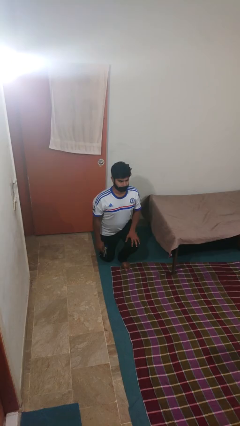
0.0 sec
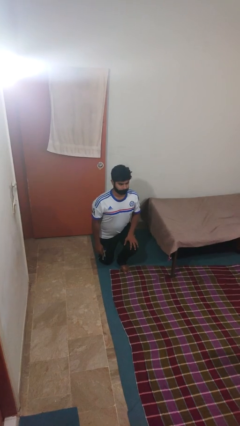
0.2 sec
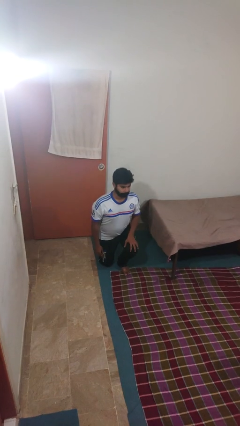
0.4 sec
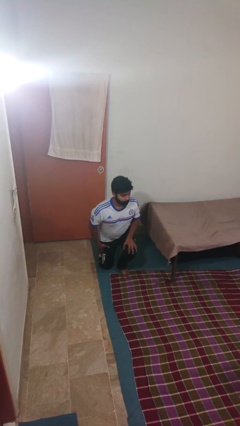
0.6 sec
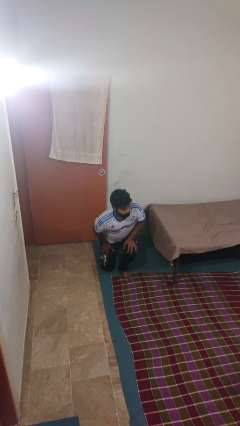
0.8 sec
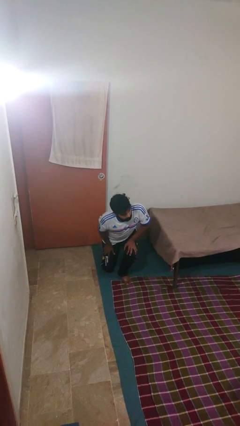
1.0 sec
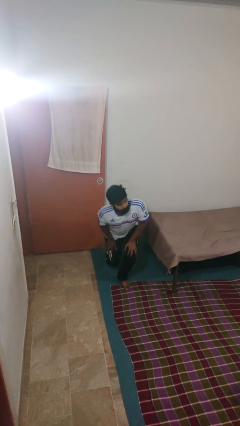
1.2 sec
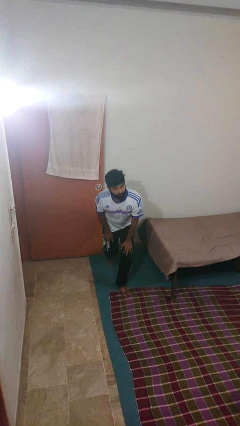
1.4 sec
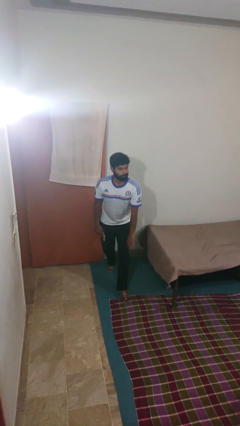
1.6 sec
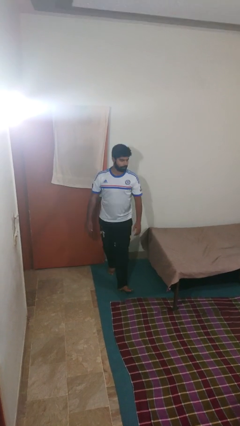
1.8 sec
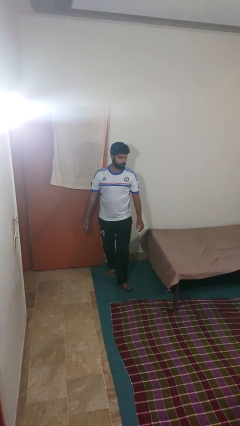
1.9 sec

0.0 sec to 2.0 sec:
person stands up from floor

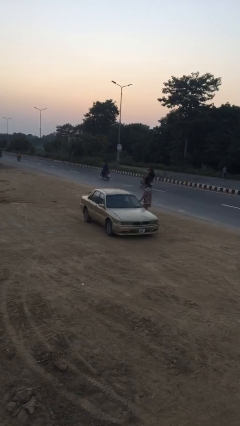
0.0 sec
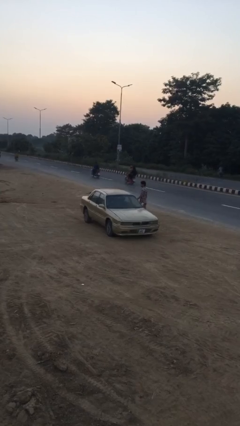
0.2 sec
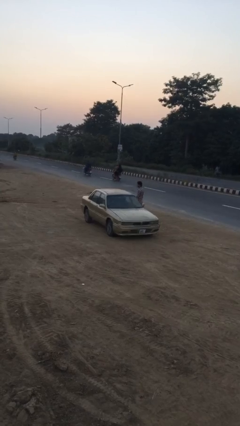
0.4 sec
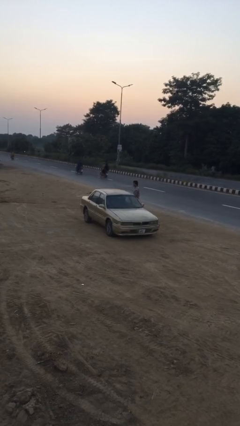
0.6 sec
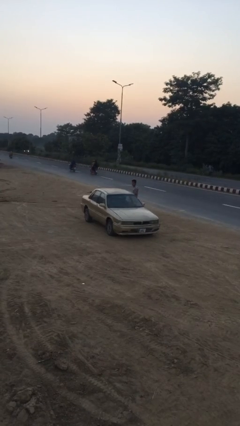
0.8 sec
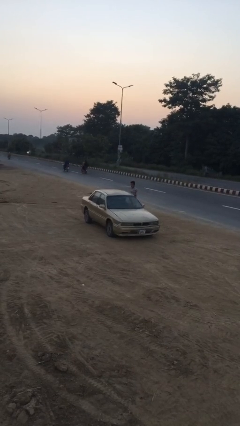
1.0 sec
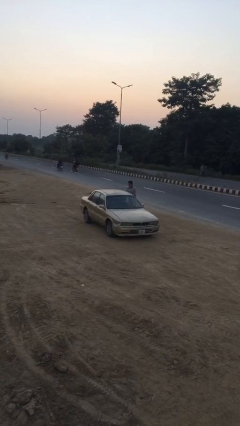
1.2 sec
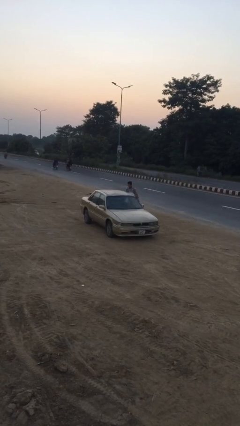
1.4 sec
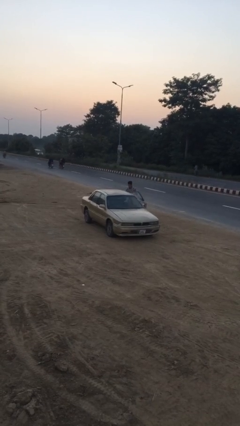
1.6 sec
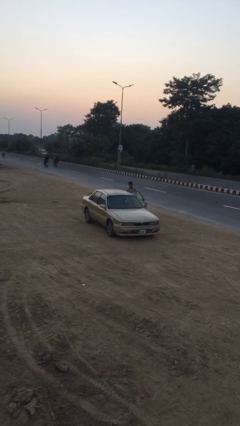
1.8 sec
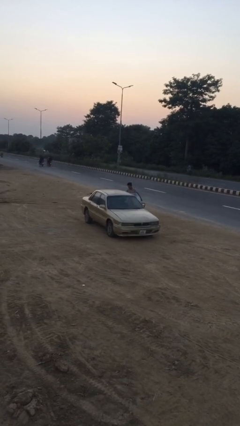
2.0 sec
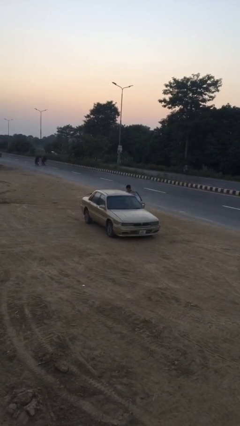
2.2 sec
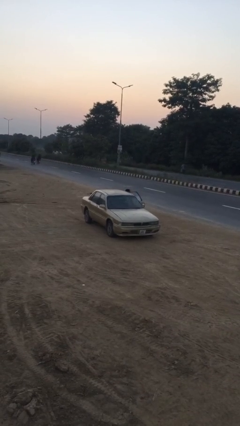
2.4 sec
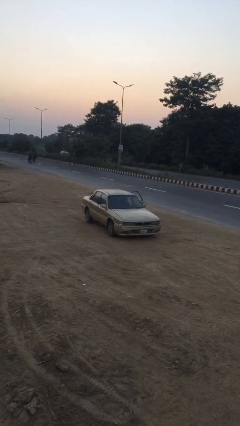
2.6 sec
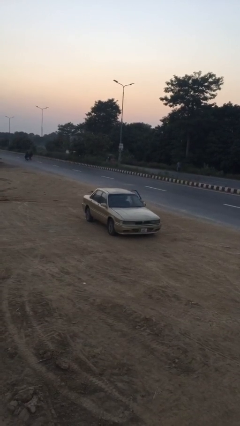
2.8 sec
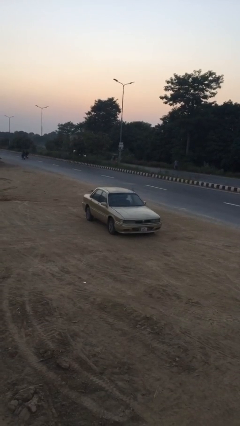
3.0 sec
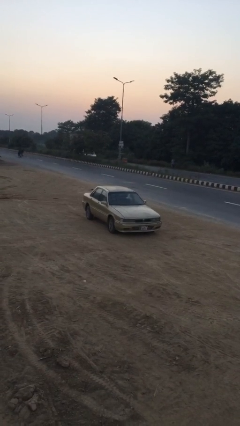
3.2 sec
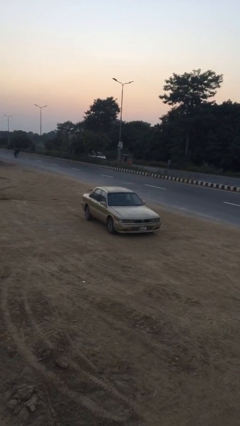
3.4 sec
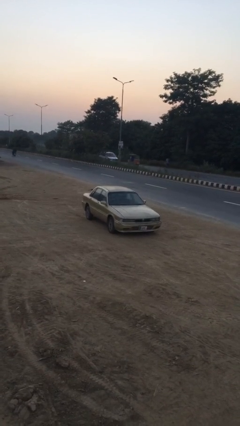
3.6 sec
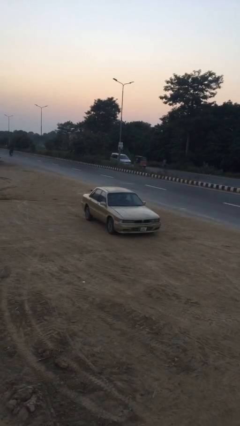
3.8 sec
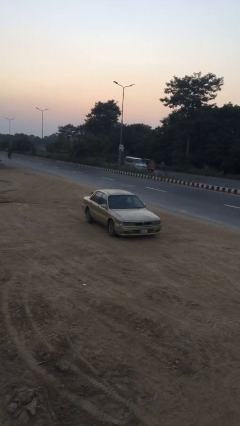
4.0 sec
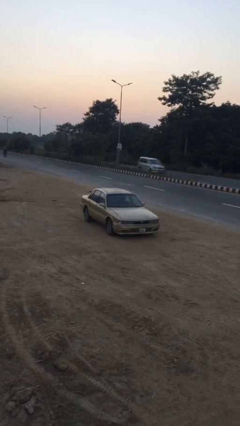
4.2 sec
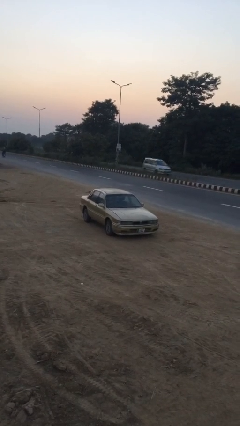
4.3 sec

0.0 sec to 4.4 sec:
car picks up person

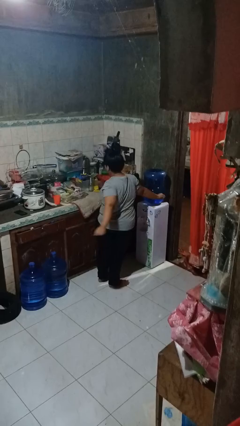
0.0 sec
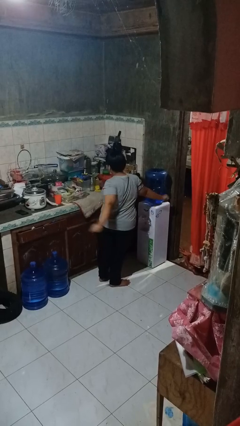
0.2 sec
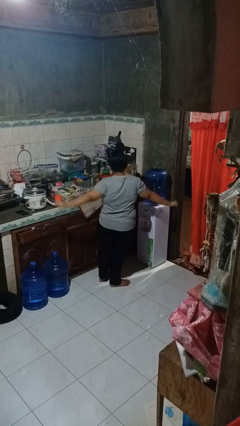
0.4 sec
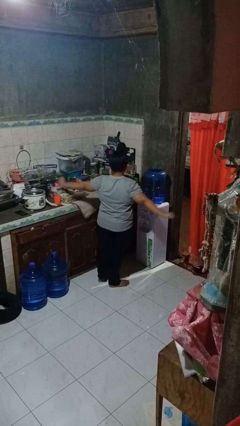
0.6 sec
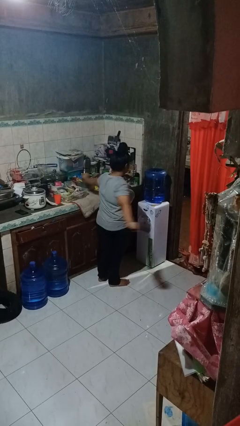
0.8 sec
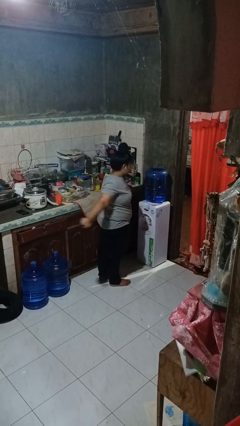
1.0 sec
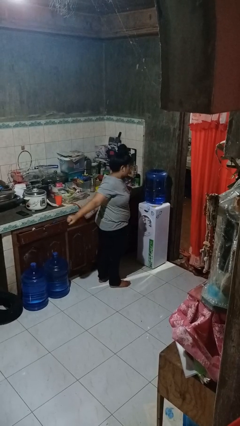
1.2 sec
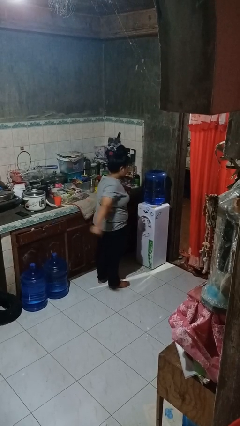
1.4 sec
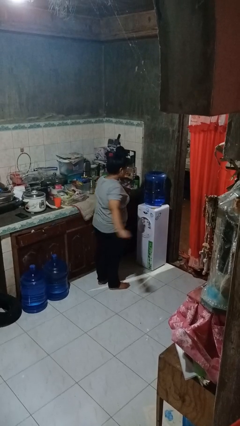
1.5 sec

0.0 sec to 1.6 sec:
person stretches arms to side

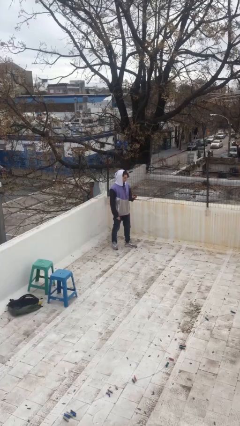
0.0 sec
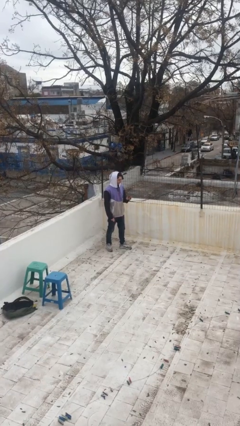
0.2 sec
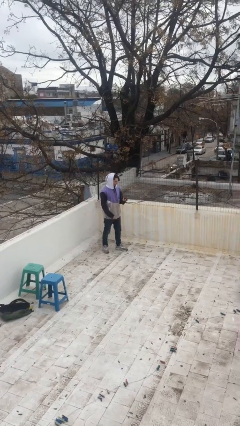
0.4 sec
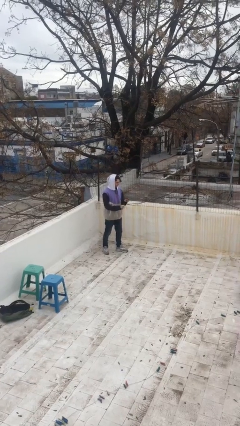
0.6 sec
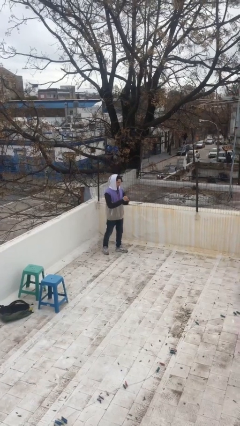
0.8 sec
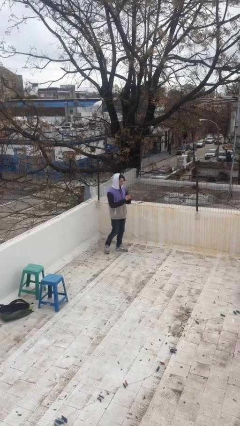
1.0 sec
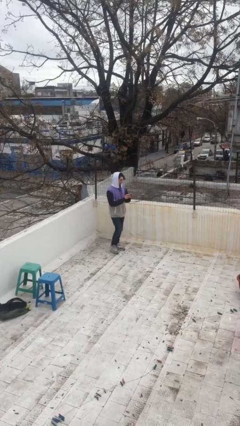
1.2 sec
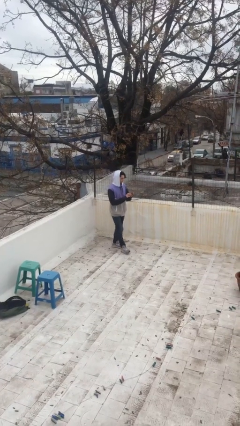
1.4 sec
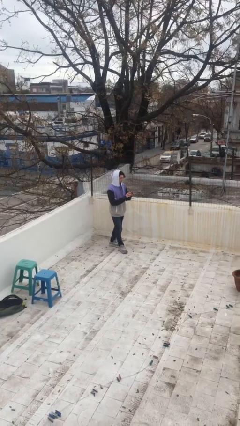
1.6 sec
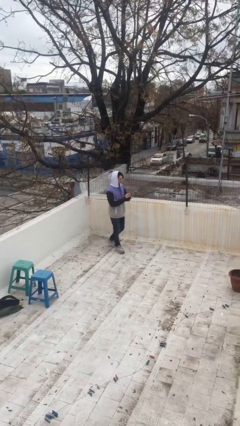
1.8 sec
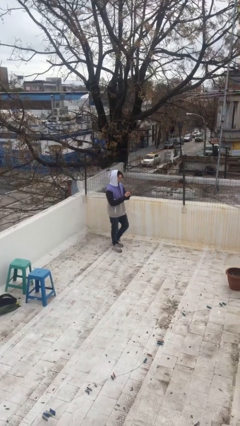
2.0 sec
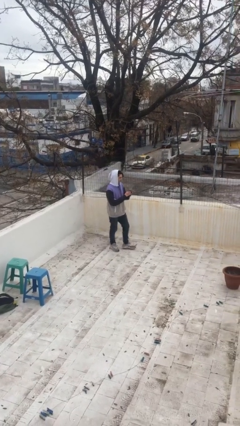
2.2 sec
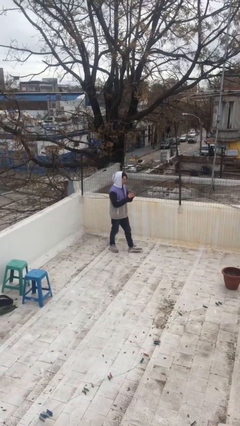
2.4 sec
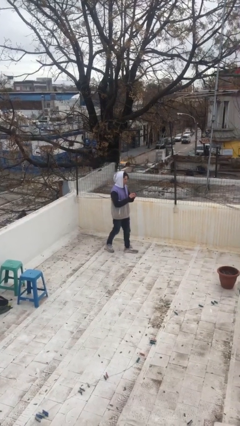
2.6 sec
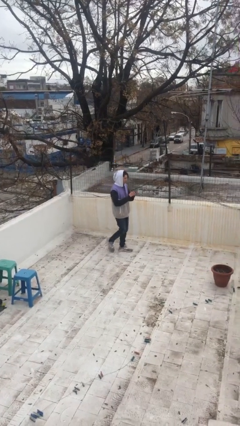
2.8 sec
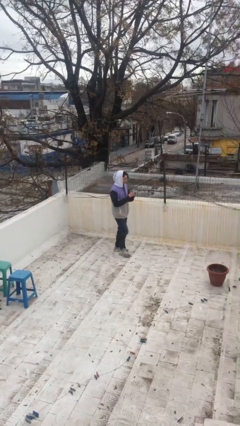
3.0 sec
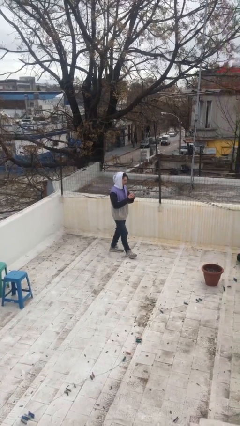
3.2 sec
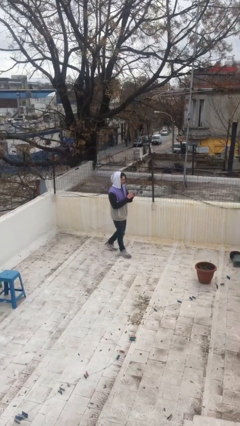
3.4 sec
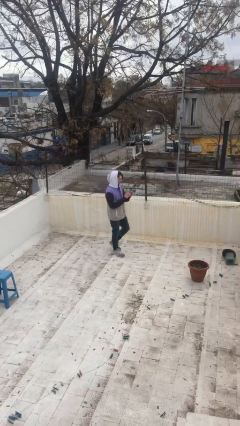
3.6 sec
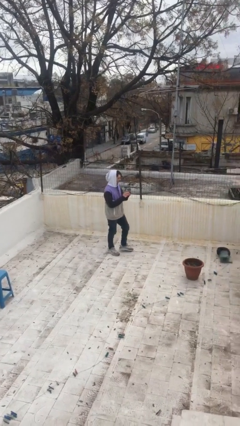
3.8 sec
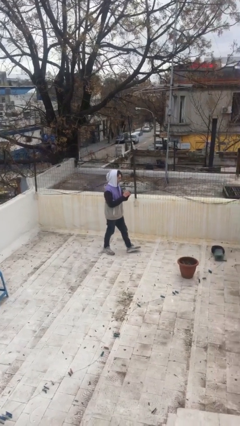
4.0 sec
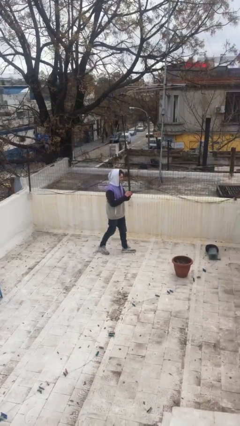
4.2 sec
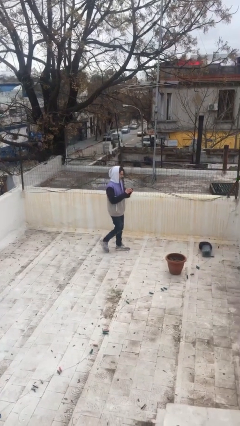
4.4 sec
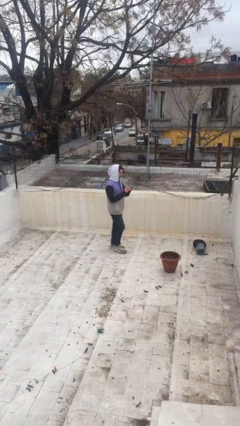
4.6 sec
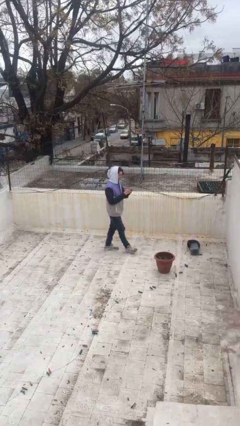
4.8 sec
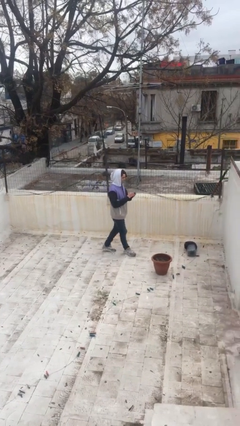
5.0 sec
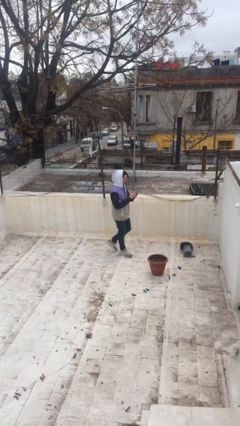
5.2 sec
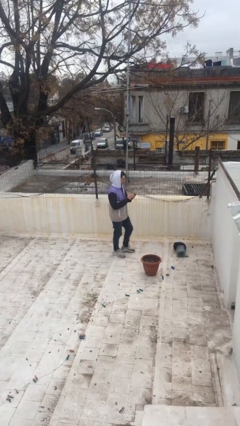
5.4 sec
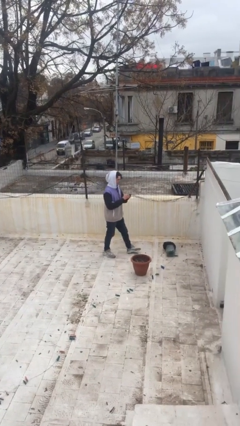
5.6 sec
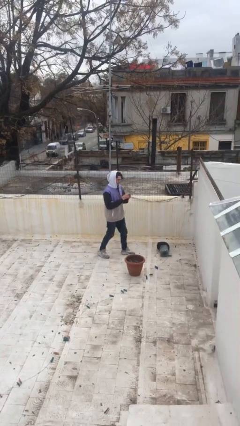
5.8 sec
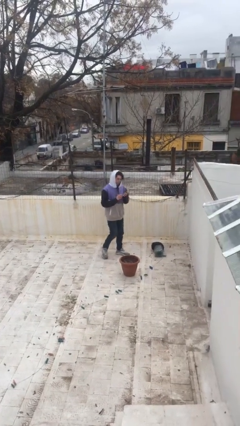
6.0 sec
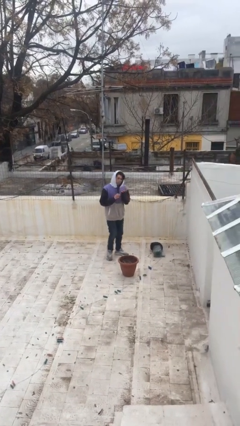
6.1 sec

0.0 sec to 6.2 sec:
person texts on phone

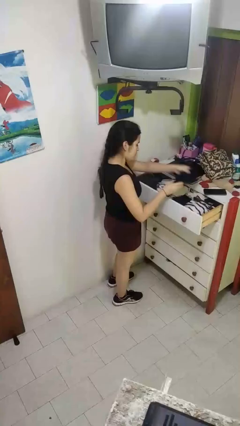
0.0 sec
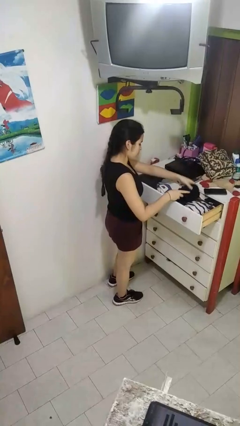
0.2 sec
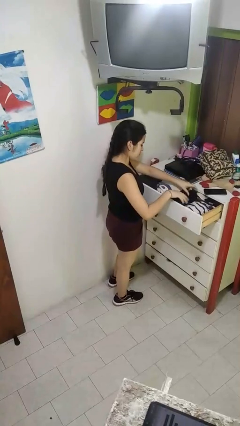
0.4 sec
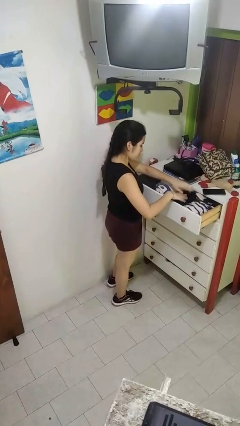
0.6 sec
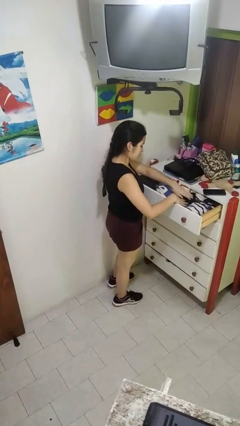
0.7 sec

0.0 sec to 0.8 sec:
person puts clothes into dresser

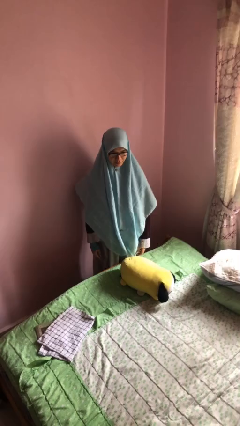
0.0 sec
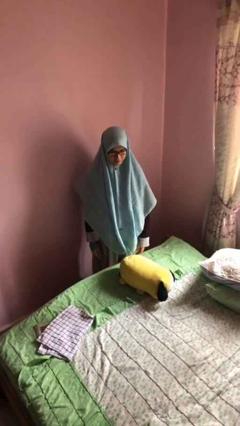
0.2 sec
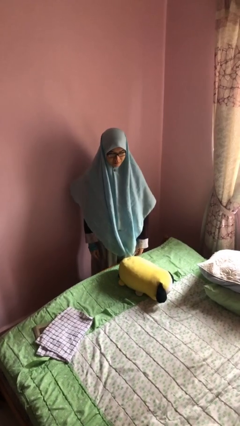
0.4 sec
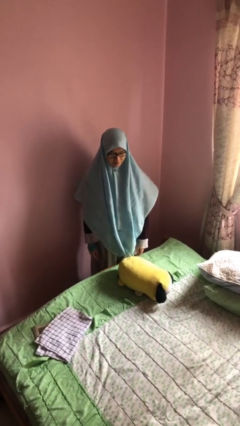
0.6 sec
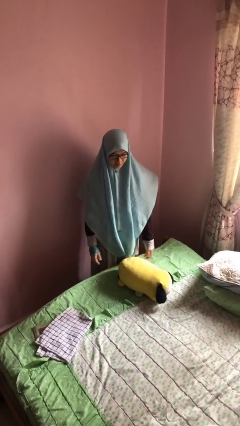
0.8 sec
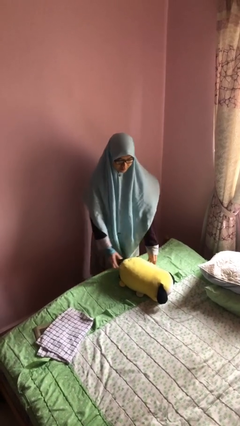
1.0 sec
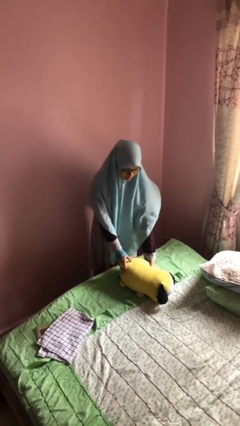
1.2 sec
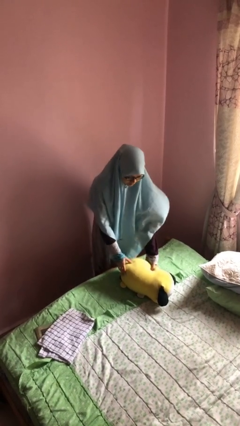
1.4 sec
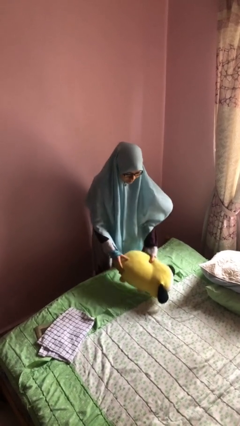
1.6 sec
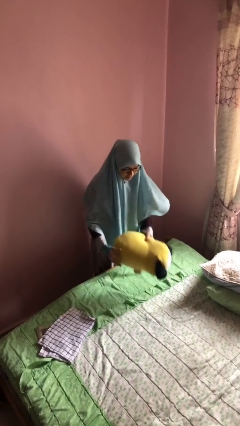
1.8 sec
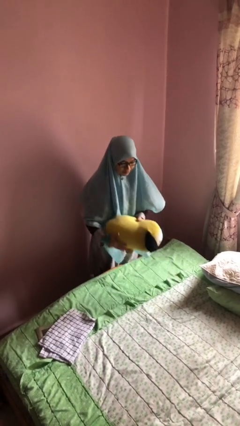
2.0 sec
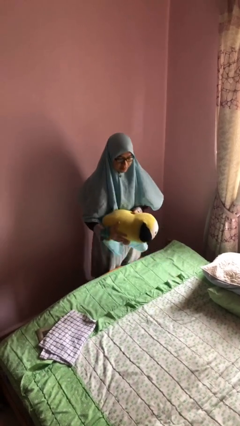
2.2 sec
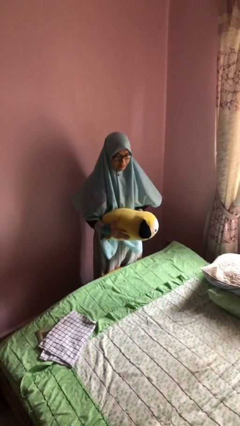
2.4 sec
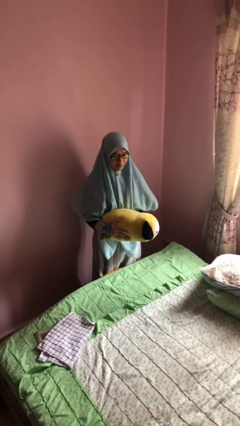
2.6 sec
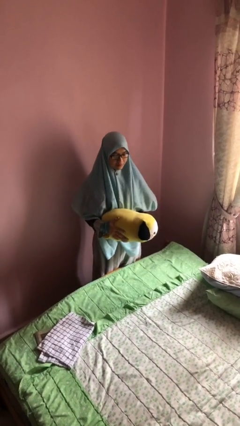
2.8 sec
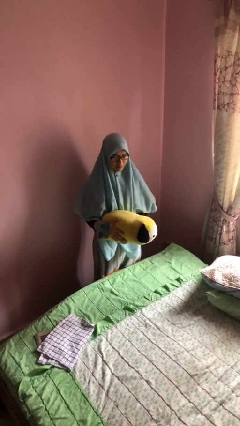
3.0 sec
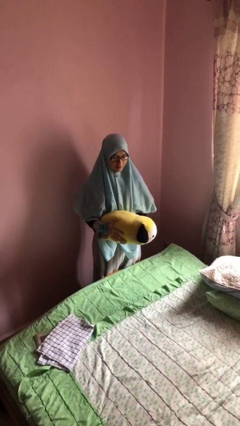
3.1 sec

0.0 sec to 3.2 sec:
person picks up object from bed
